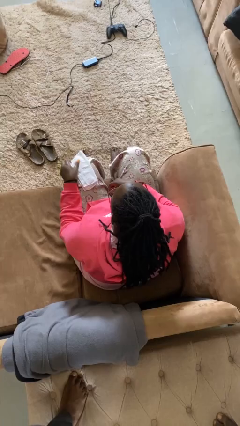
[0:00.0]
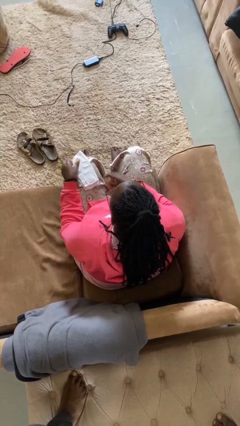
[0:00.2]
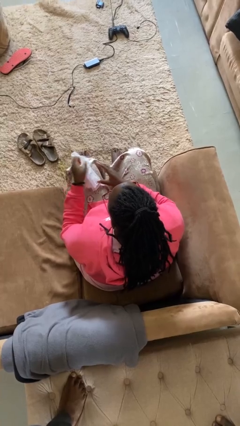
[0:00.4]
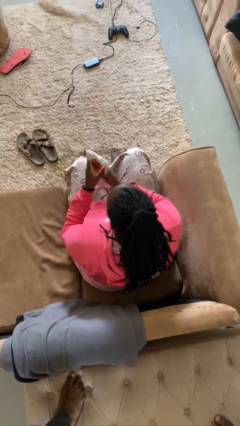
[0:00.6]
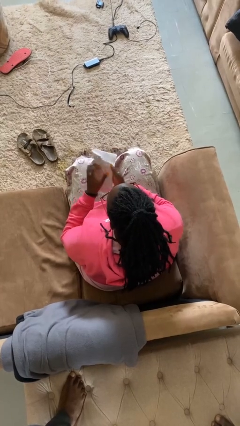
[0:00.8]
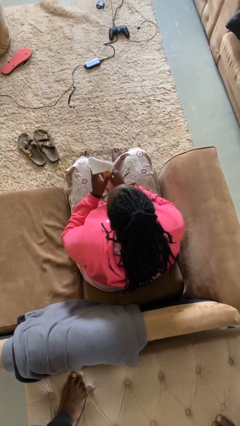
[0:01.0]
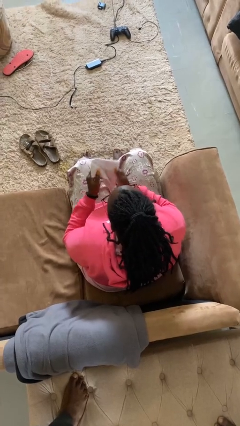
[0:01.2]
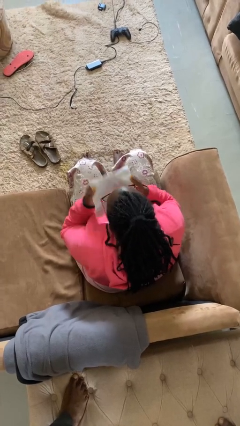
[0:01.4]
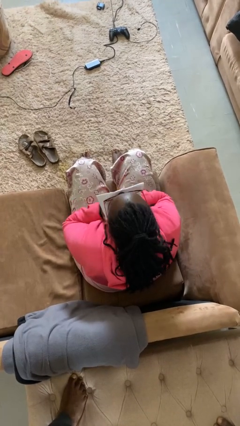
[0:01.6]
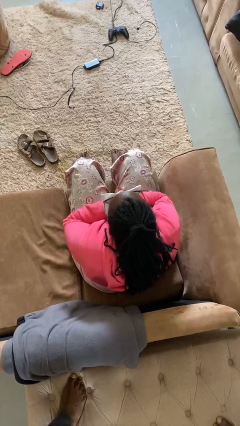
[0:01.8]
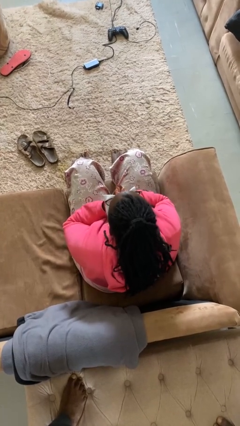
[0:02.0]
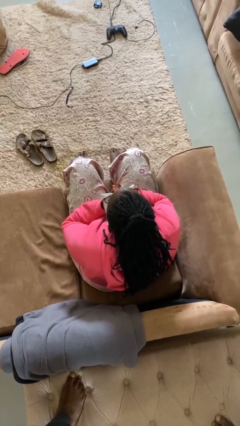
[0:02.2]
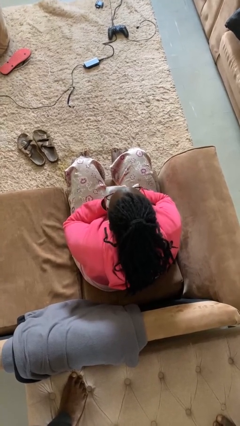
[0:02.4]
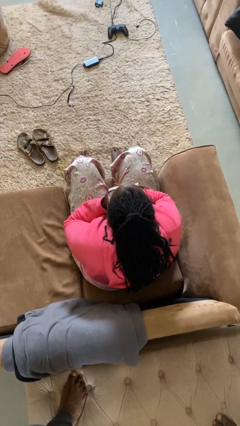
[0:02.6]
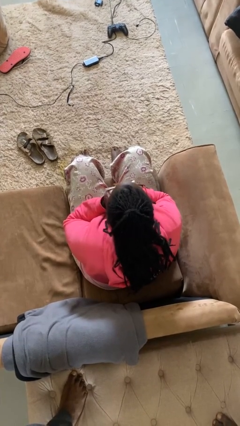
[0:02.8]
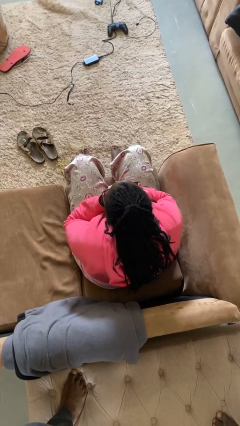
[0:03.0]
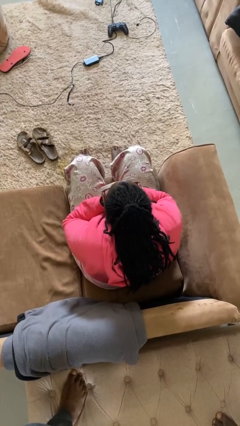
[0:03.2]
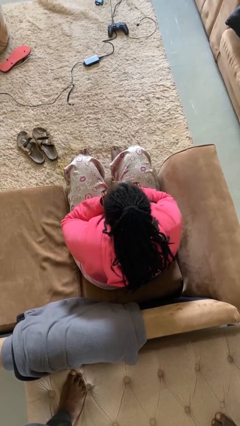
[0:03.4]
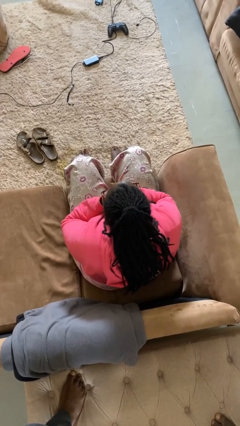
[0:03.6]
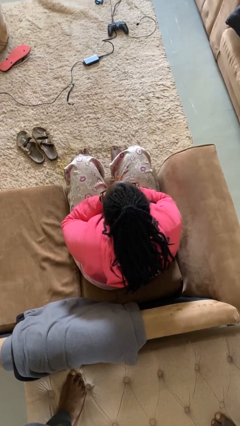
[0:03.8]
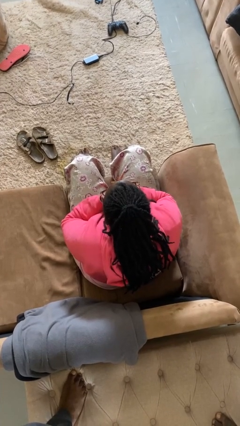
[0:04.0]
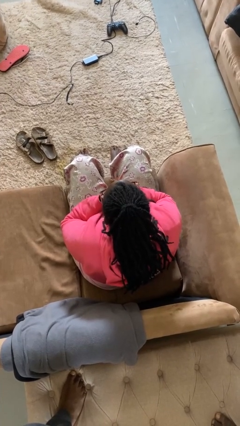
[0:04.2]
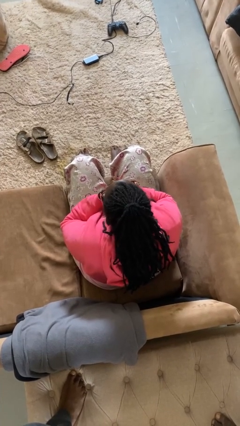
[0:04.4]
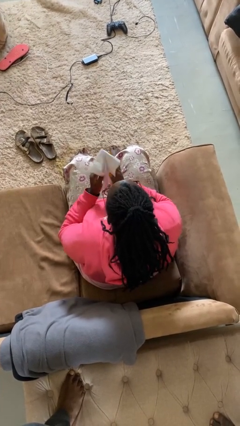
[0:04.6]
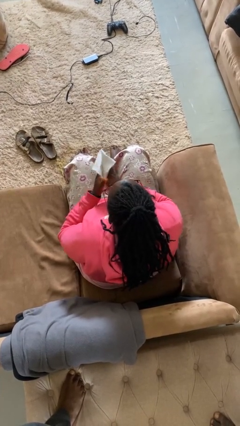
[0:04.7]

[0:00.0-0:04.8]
person blows nose

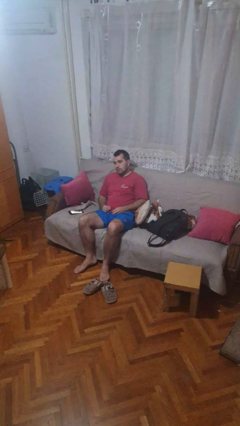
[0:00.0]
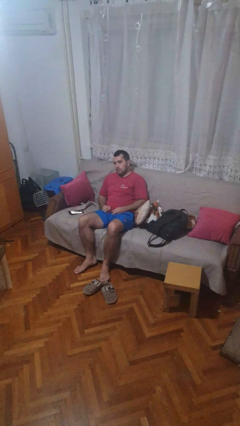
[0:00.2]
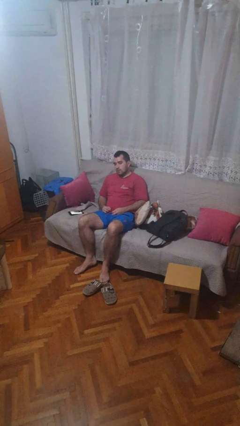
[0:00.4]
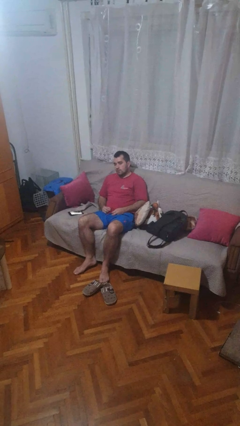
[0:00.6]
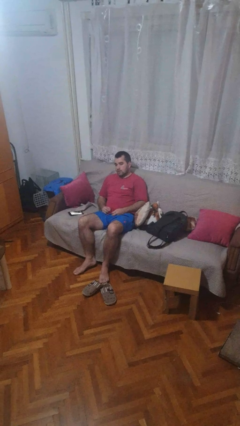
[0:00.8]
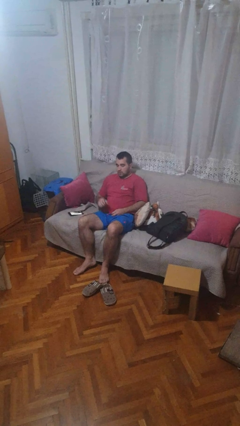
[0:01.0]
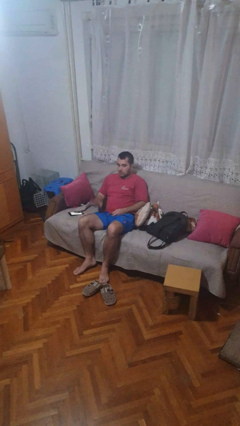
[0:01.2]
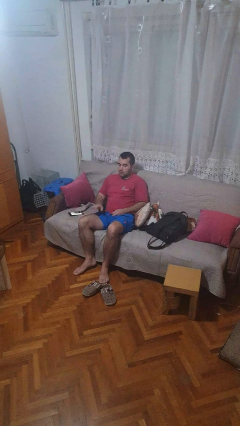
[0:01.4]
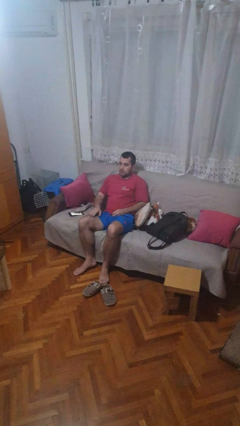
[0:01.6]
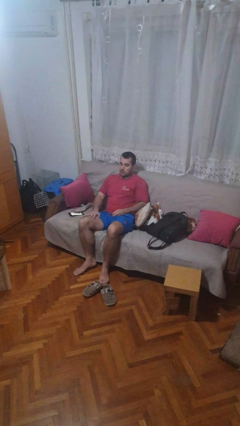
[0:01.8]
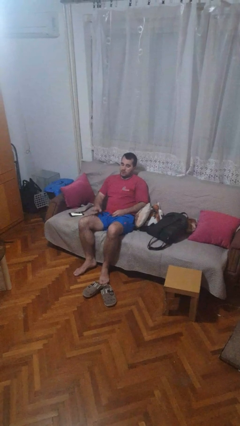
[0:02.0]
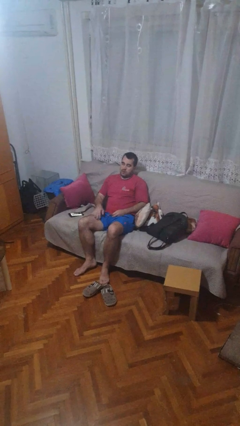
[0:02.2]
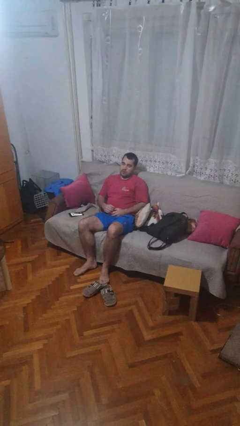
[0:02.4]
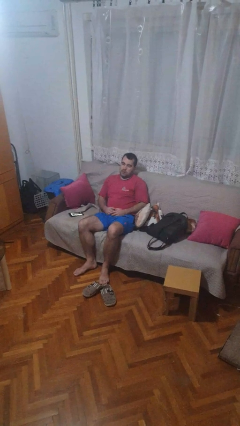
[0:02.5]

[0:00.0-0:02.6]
person slaps hands on thighs

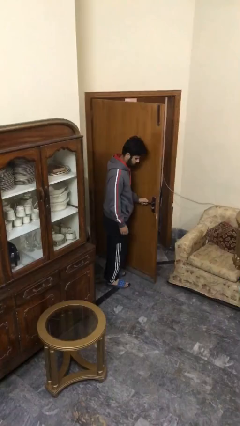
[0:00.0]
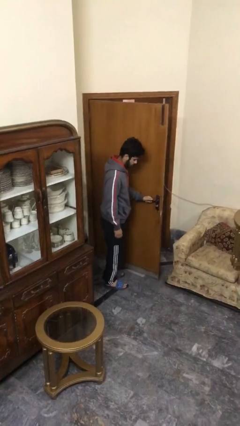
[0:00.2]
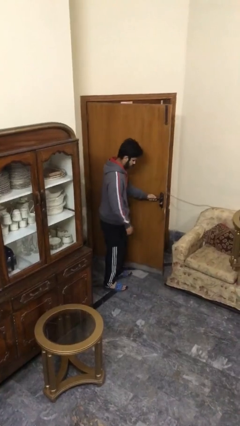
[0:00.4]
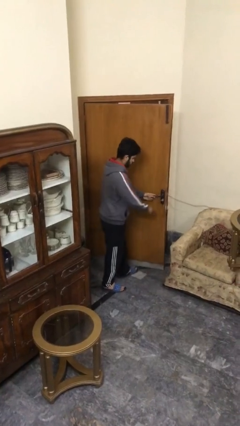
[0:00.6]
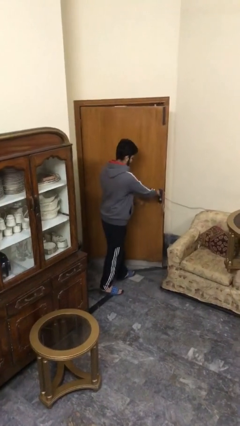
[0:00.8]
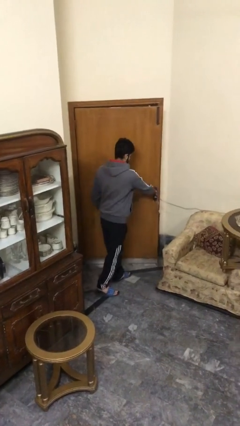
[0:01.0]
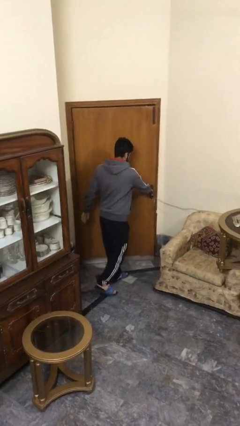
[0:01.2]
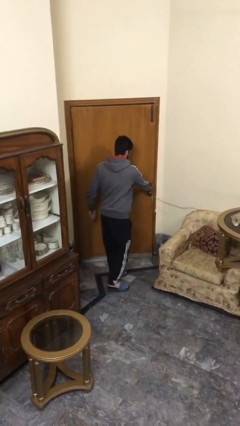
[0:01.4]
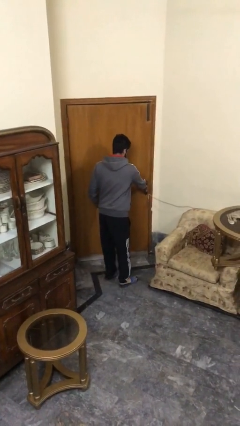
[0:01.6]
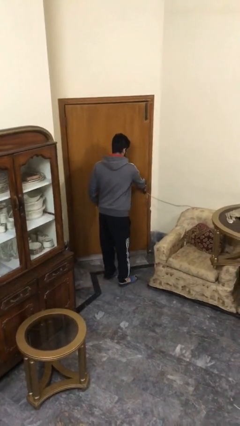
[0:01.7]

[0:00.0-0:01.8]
person closes facility door

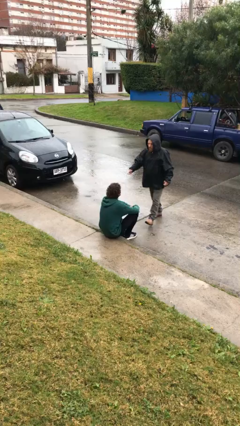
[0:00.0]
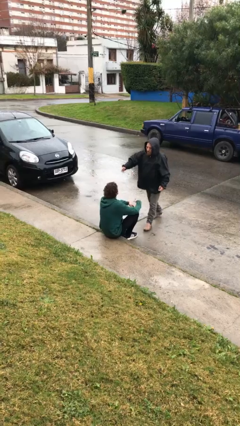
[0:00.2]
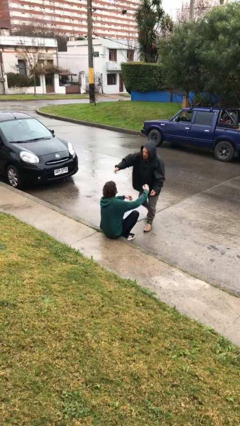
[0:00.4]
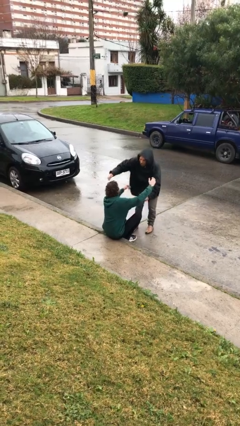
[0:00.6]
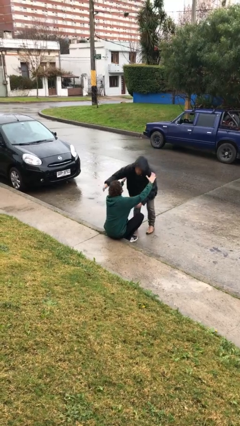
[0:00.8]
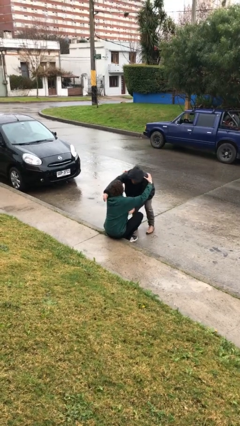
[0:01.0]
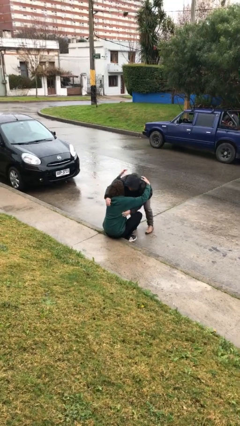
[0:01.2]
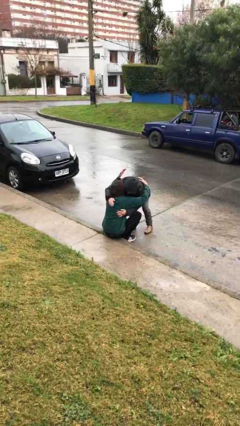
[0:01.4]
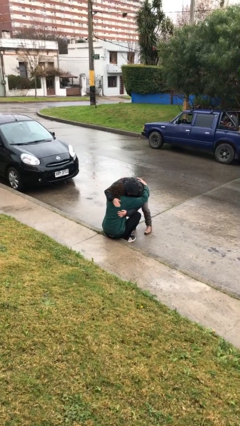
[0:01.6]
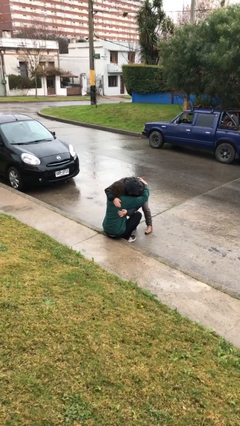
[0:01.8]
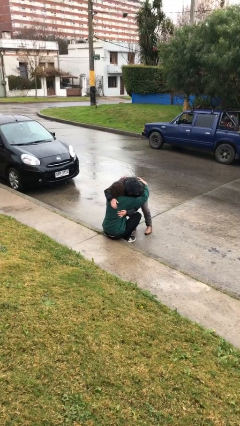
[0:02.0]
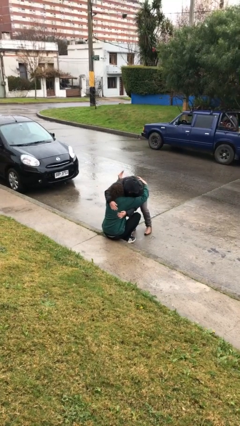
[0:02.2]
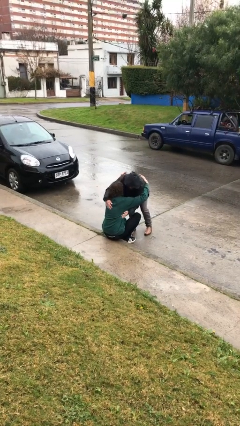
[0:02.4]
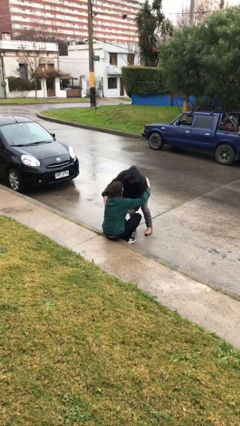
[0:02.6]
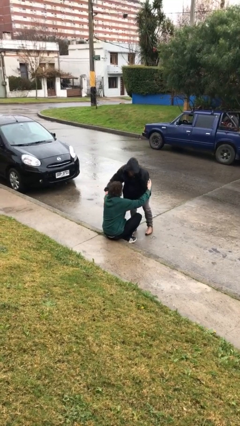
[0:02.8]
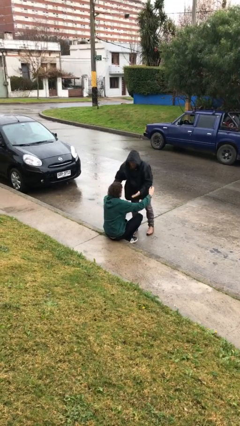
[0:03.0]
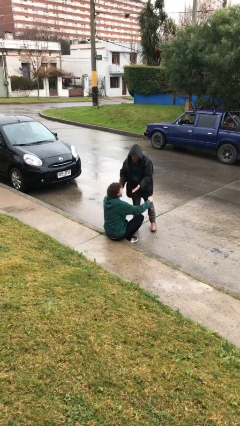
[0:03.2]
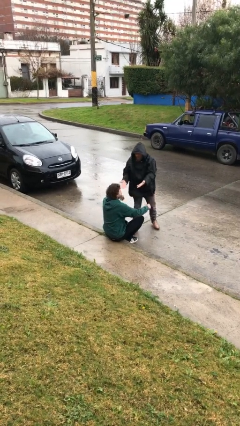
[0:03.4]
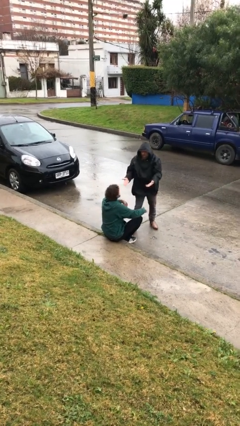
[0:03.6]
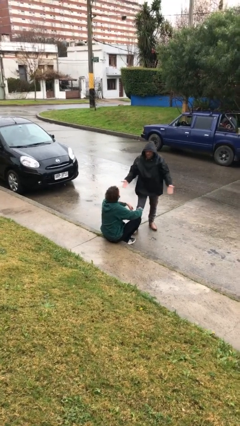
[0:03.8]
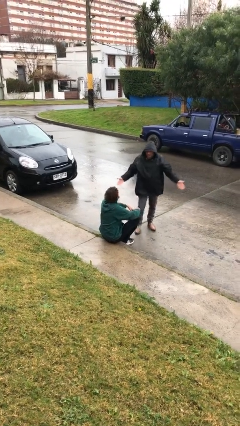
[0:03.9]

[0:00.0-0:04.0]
person embraces person

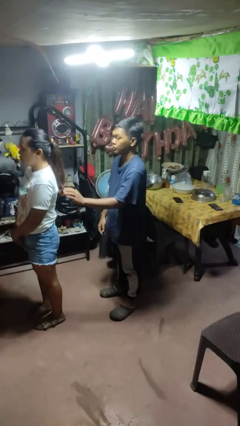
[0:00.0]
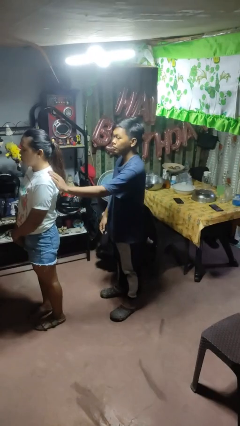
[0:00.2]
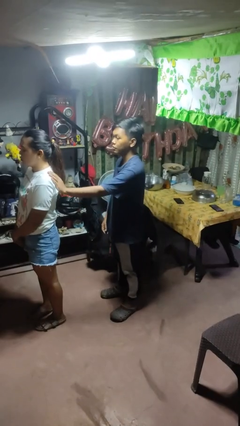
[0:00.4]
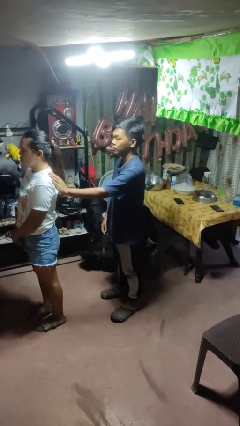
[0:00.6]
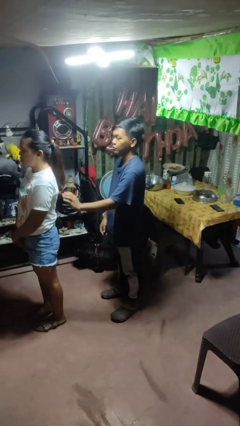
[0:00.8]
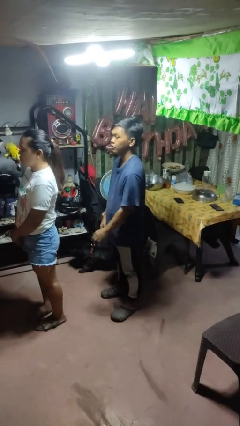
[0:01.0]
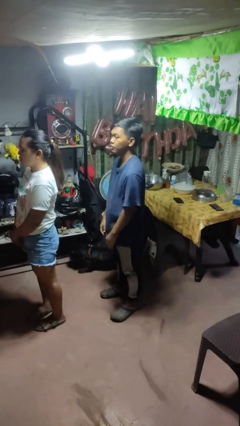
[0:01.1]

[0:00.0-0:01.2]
person touches back of person

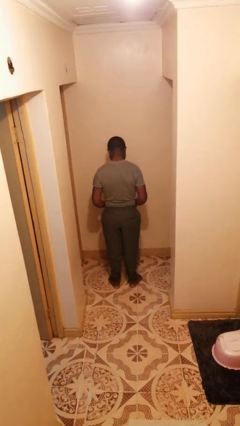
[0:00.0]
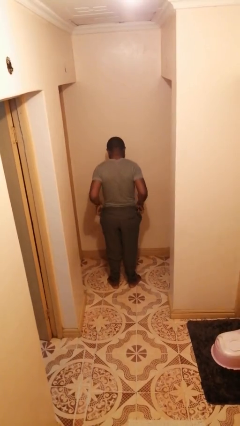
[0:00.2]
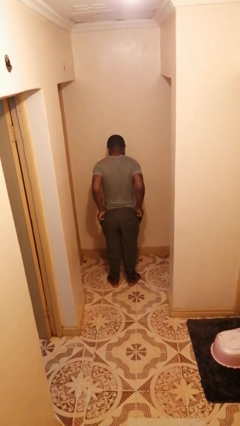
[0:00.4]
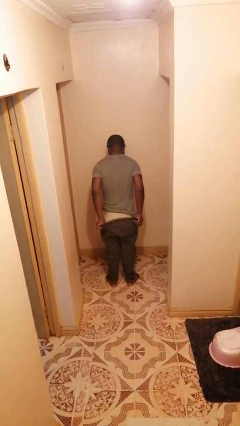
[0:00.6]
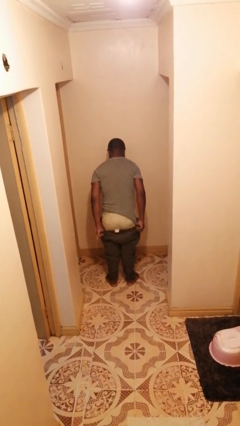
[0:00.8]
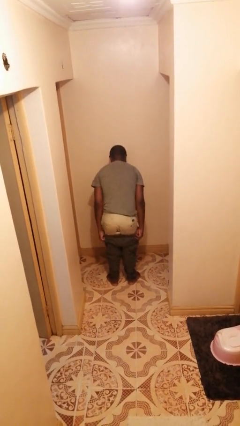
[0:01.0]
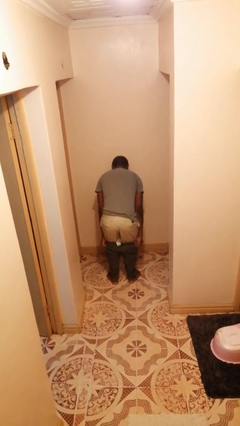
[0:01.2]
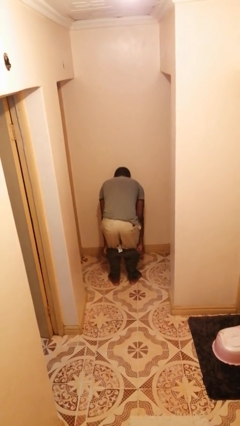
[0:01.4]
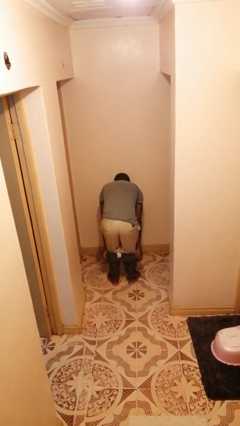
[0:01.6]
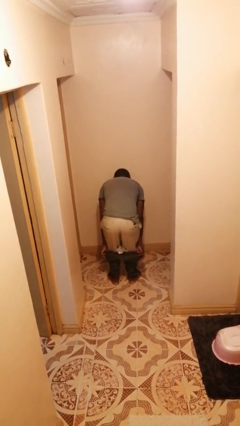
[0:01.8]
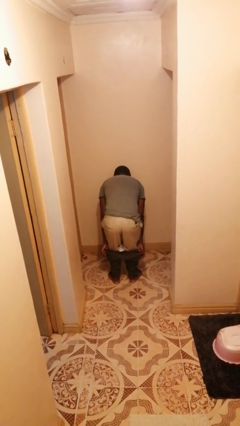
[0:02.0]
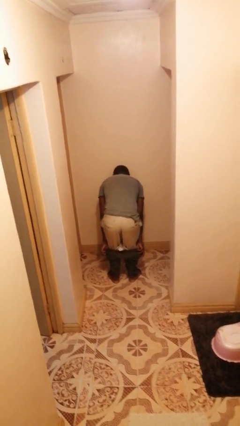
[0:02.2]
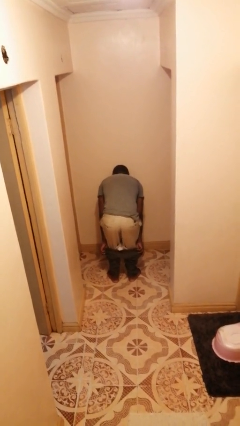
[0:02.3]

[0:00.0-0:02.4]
person takes off pants

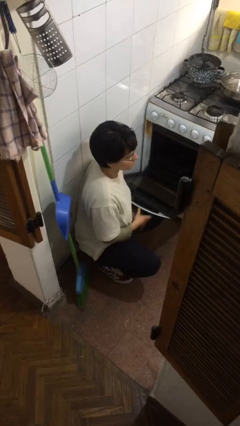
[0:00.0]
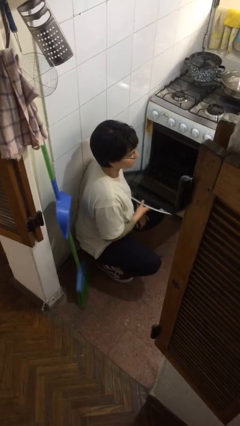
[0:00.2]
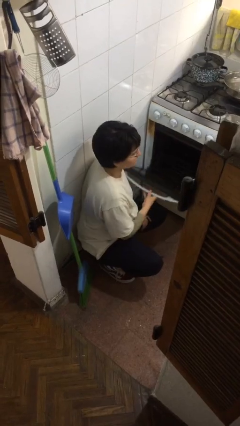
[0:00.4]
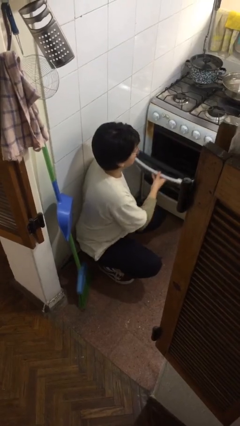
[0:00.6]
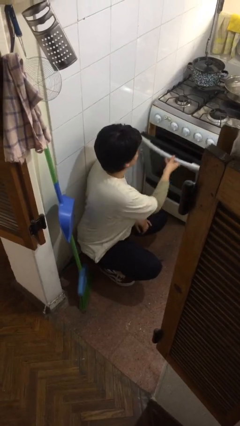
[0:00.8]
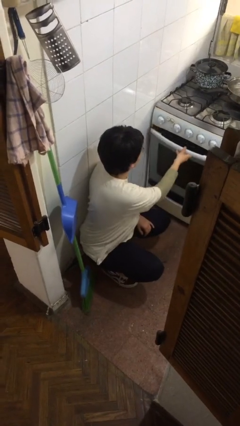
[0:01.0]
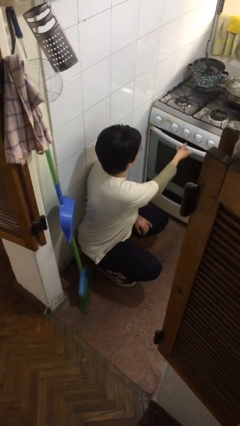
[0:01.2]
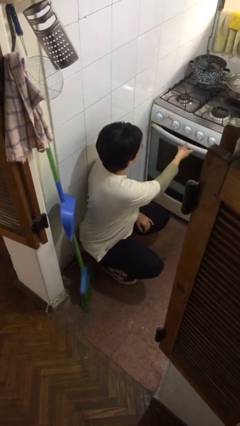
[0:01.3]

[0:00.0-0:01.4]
person closes oven door
